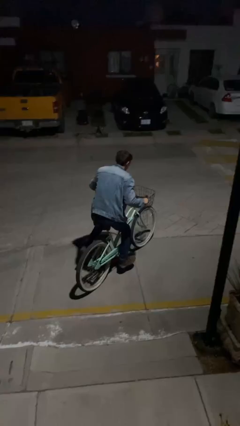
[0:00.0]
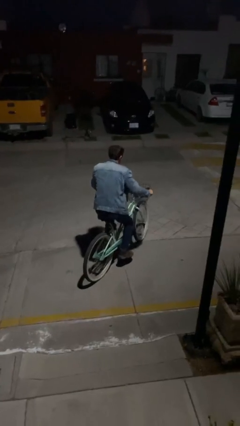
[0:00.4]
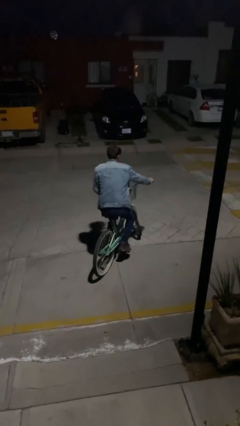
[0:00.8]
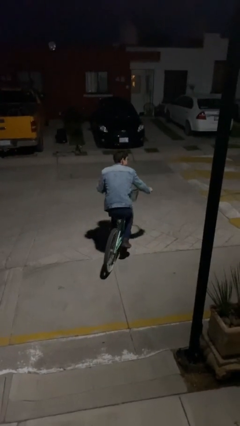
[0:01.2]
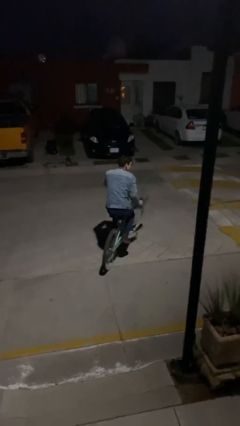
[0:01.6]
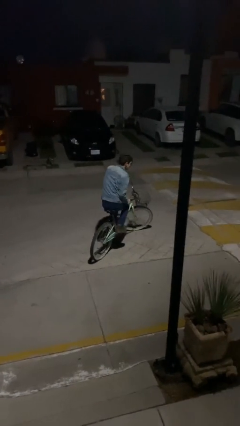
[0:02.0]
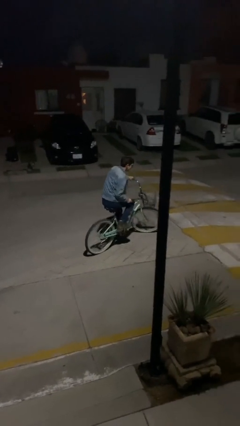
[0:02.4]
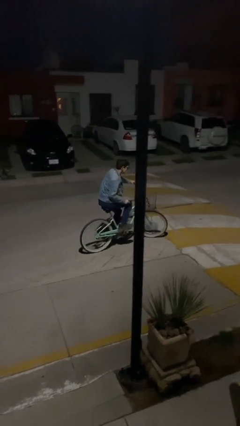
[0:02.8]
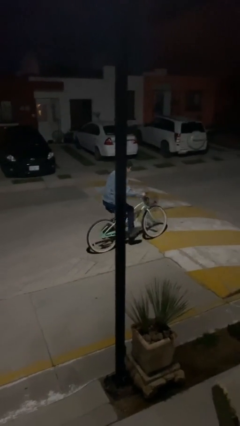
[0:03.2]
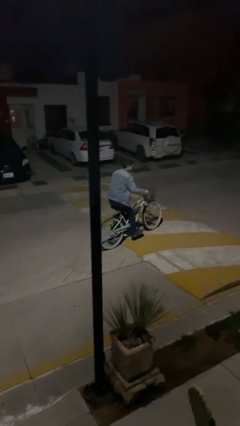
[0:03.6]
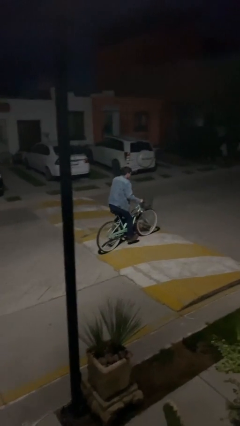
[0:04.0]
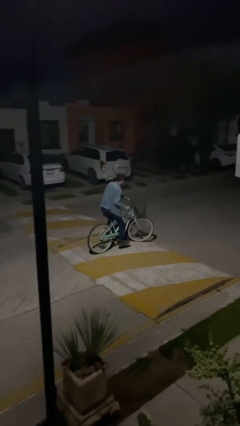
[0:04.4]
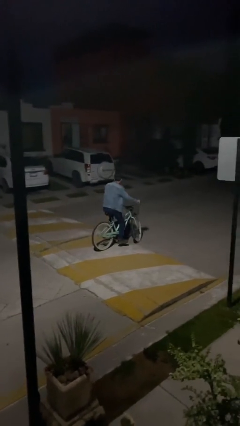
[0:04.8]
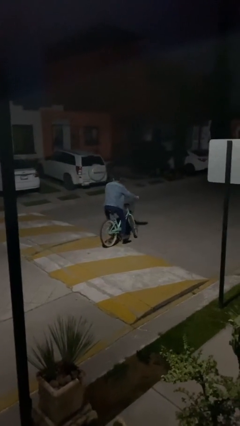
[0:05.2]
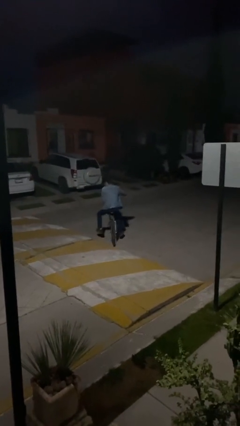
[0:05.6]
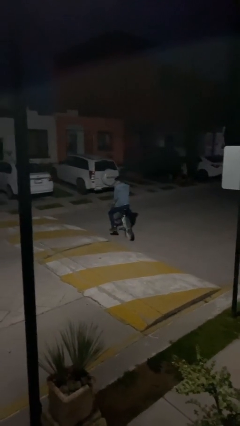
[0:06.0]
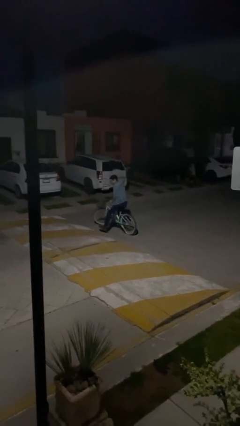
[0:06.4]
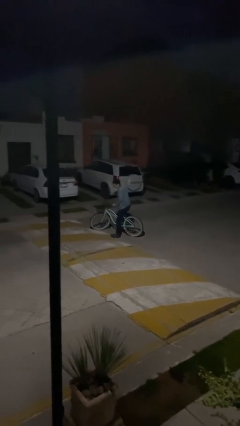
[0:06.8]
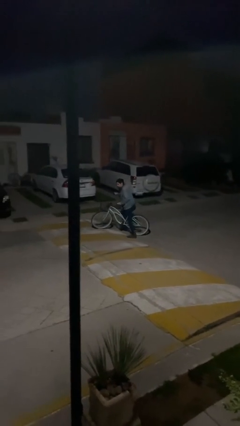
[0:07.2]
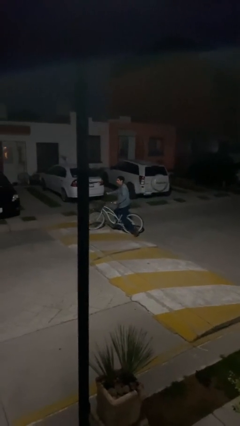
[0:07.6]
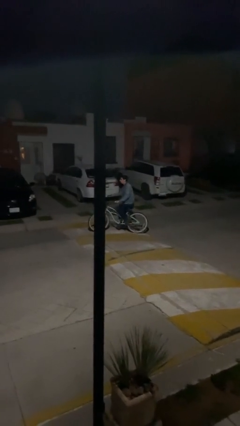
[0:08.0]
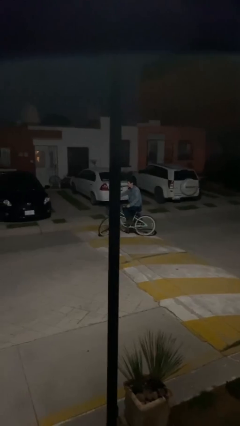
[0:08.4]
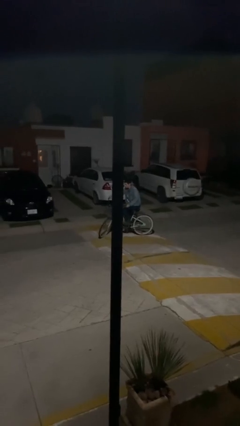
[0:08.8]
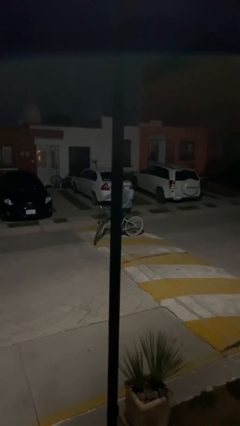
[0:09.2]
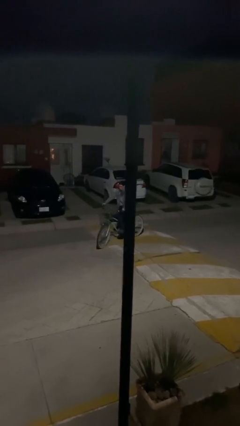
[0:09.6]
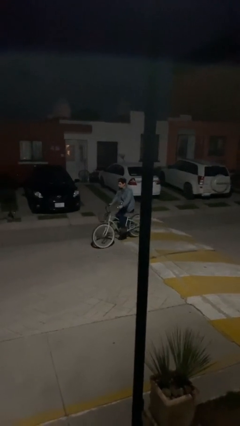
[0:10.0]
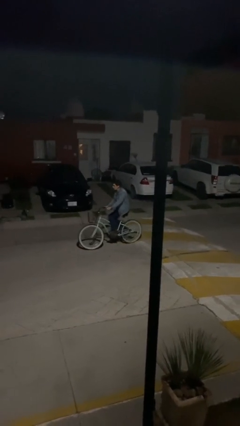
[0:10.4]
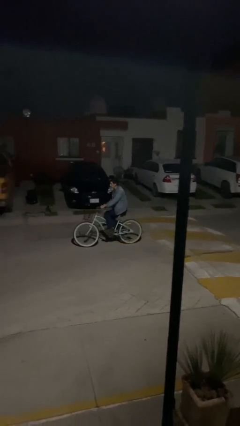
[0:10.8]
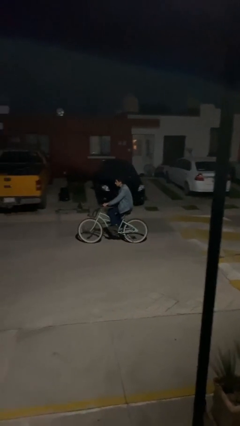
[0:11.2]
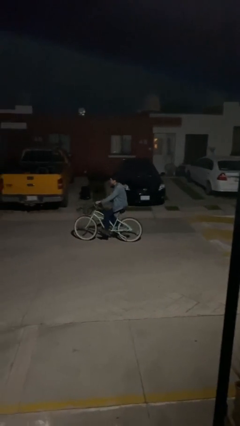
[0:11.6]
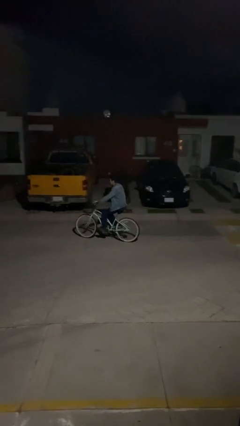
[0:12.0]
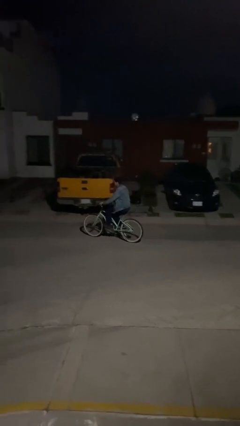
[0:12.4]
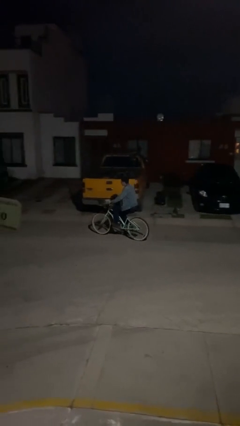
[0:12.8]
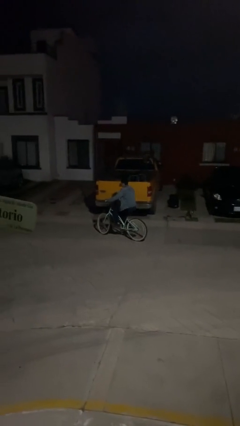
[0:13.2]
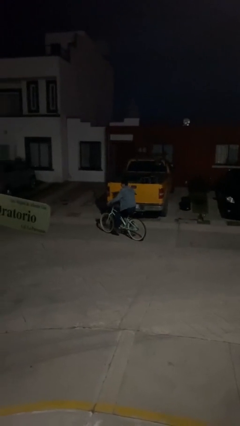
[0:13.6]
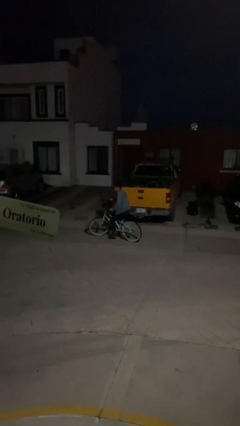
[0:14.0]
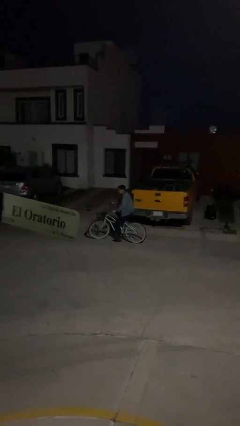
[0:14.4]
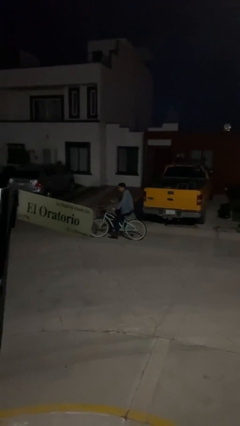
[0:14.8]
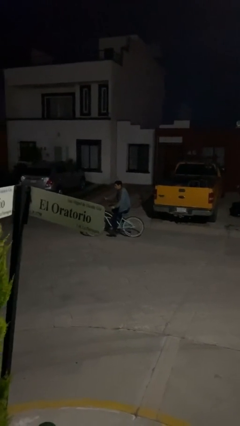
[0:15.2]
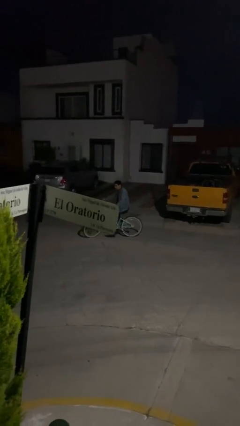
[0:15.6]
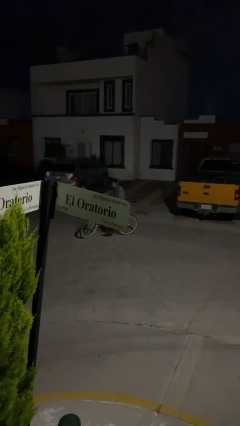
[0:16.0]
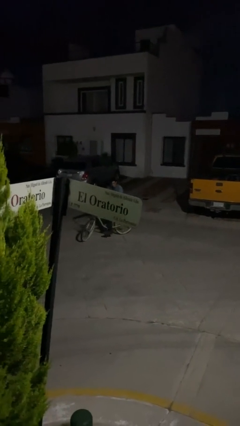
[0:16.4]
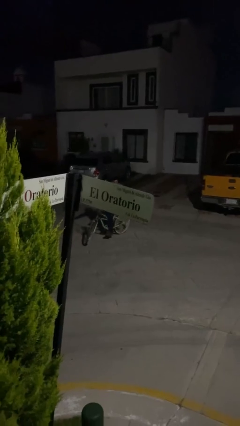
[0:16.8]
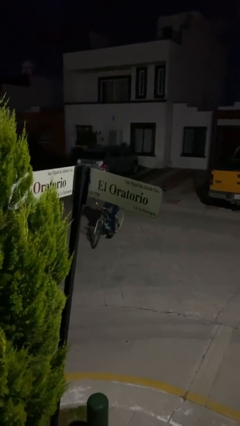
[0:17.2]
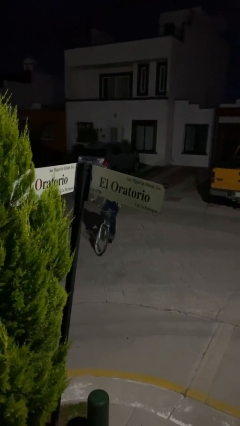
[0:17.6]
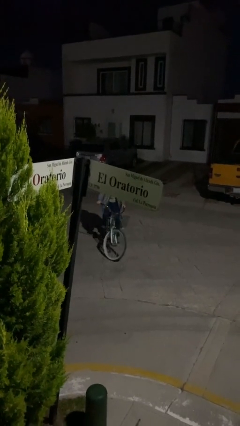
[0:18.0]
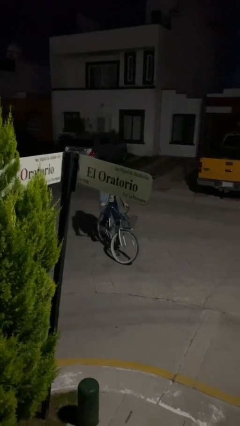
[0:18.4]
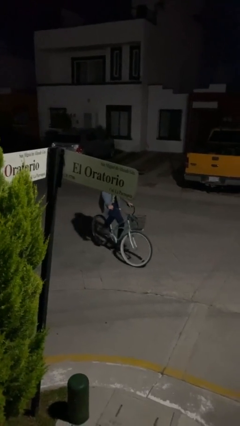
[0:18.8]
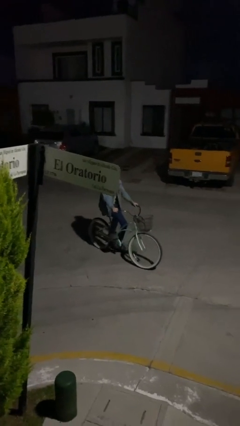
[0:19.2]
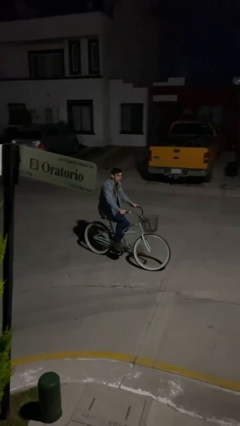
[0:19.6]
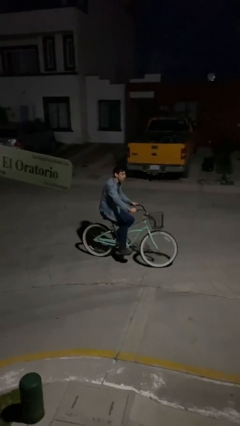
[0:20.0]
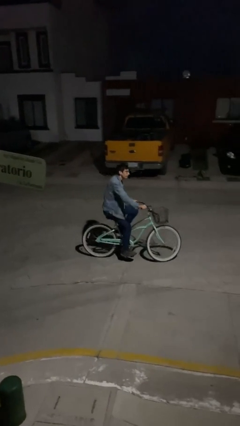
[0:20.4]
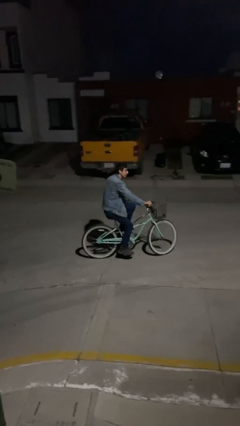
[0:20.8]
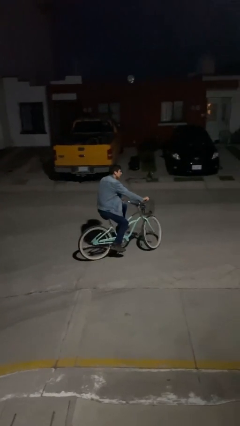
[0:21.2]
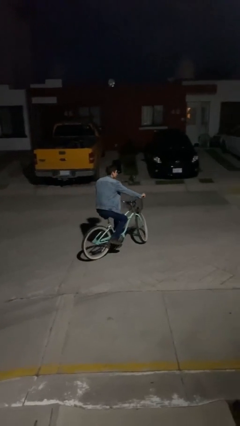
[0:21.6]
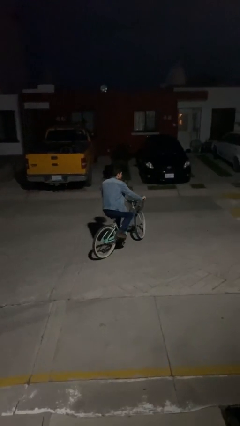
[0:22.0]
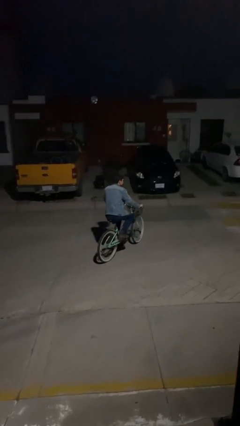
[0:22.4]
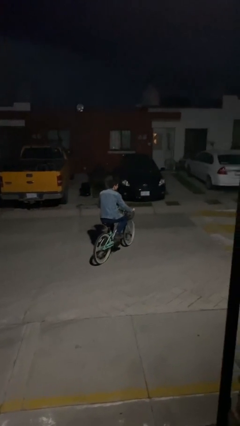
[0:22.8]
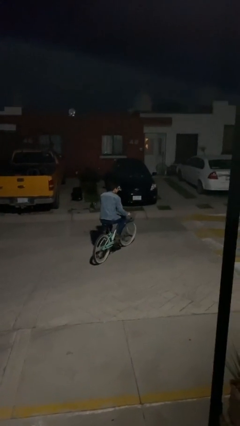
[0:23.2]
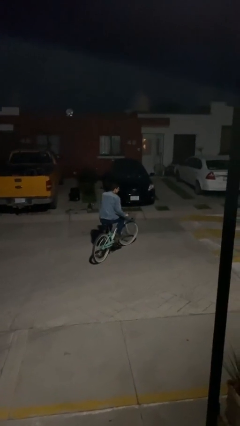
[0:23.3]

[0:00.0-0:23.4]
person rides bicycle

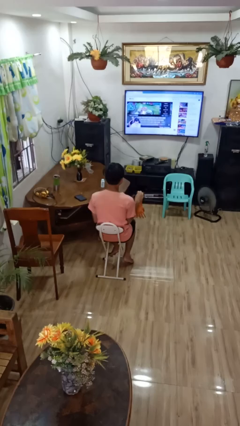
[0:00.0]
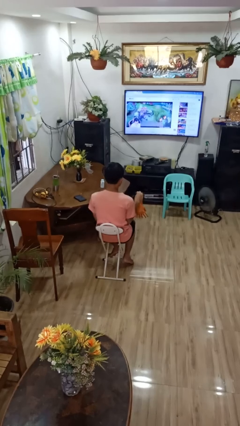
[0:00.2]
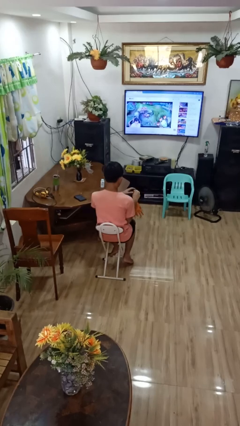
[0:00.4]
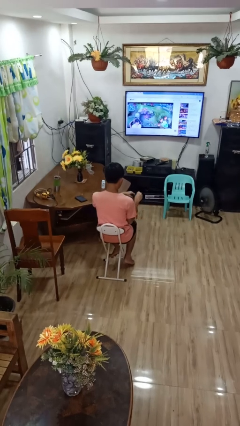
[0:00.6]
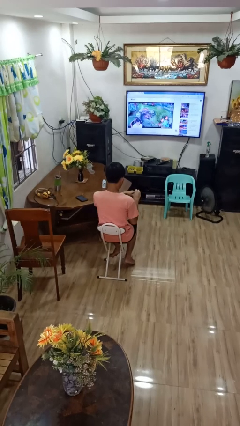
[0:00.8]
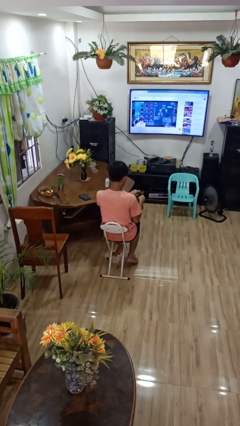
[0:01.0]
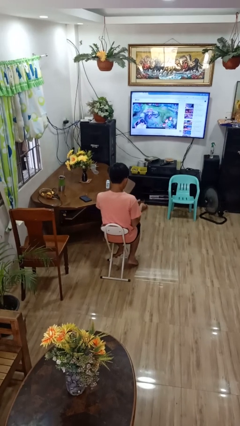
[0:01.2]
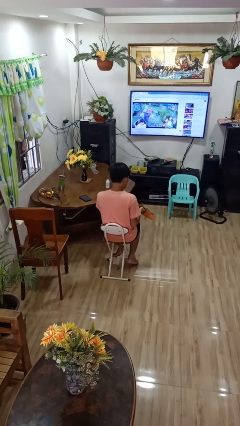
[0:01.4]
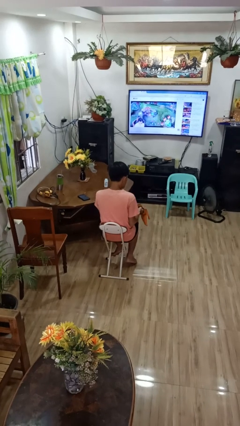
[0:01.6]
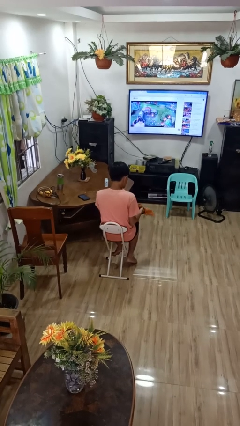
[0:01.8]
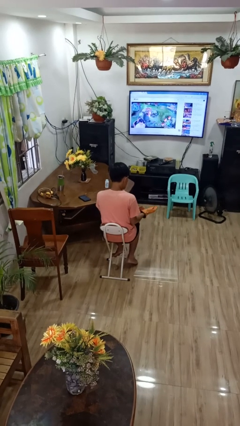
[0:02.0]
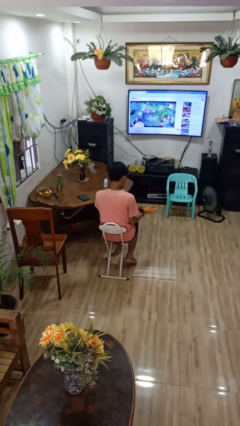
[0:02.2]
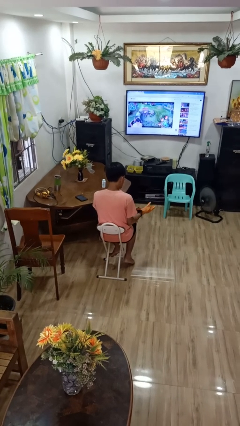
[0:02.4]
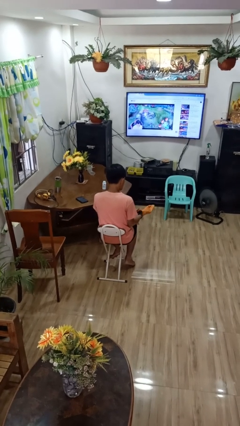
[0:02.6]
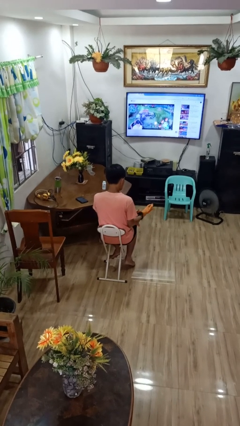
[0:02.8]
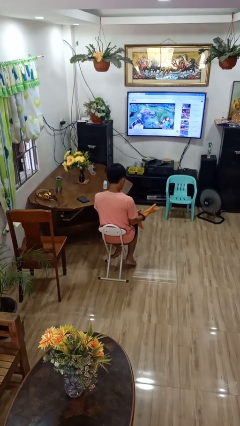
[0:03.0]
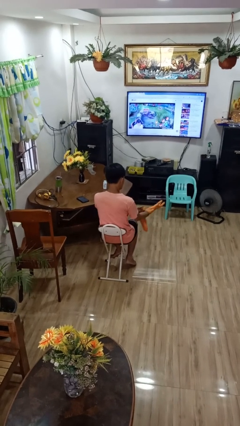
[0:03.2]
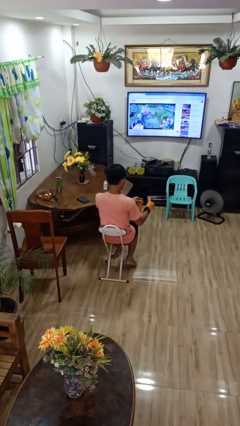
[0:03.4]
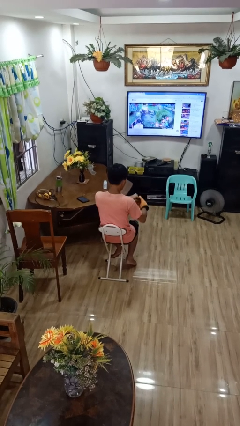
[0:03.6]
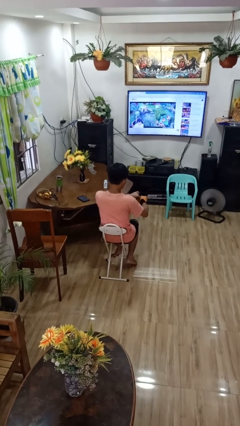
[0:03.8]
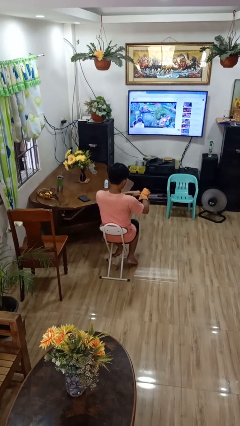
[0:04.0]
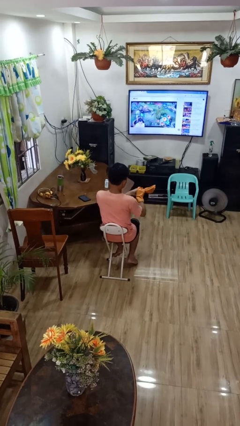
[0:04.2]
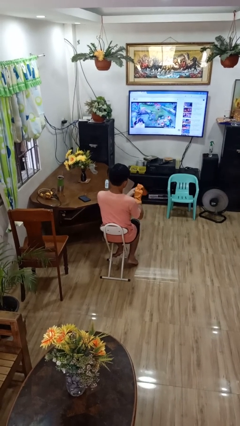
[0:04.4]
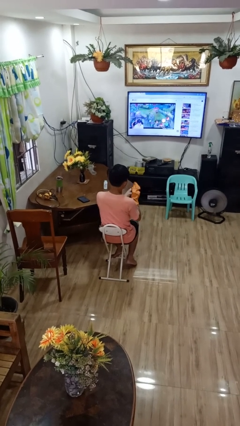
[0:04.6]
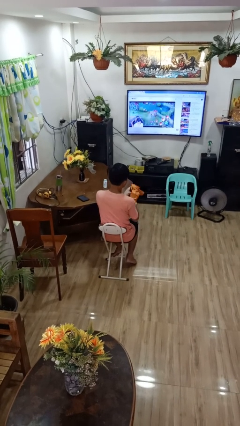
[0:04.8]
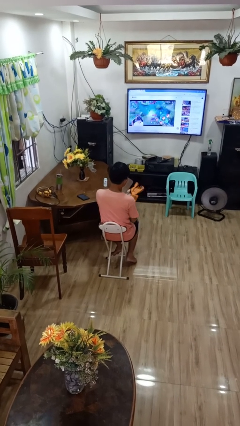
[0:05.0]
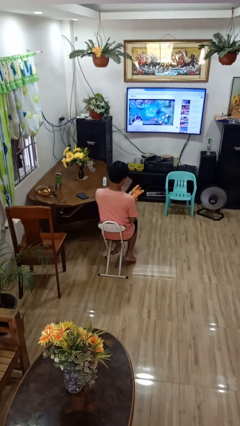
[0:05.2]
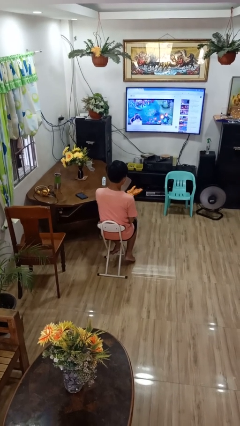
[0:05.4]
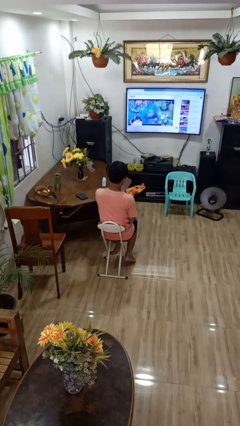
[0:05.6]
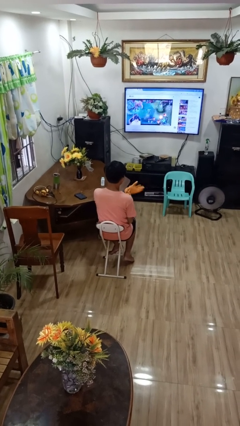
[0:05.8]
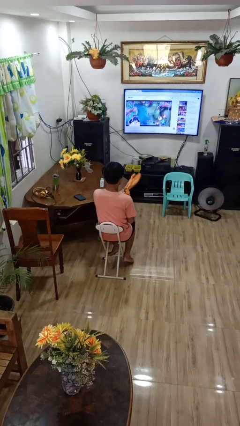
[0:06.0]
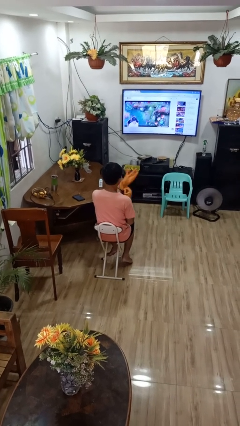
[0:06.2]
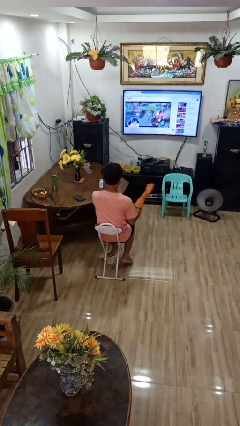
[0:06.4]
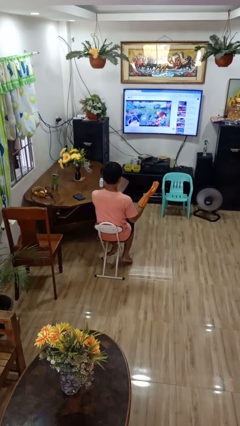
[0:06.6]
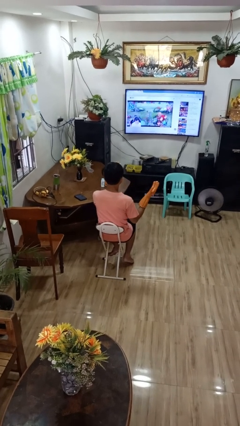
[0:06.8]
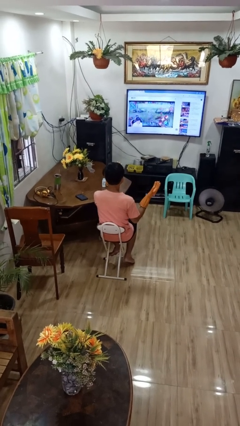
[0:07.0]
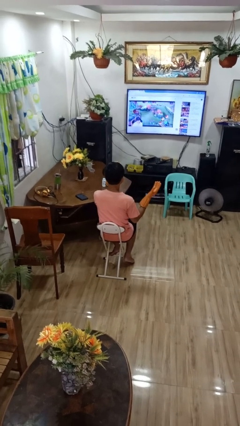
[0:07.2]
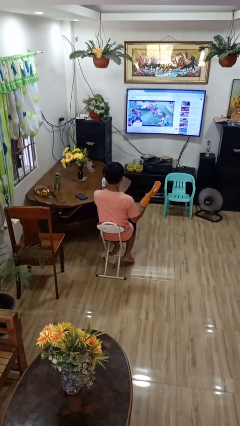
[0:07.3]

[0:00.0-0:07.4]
person puts on gloves
